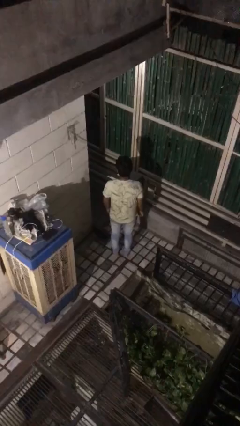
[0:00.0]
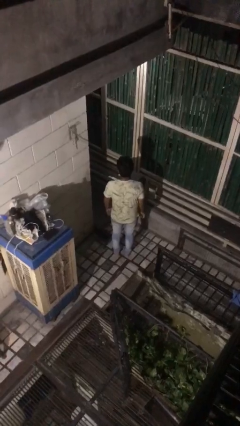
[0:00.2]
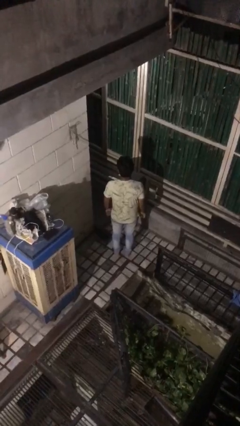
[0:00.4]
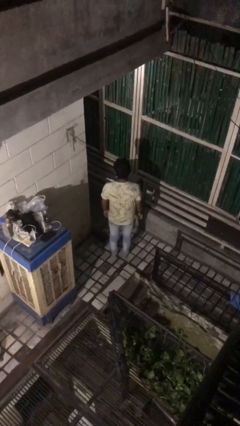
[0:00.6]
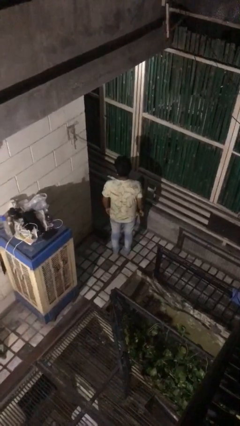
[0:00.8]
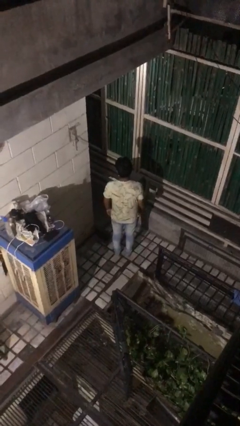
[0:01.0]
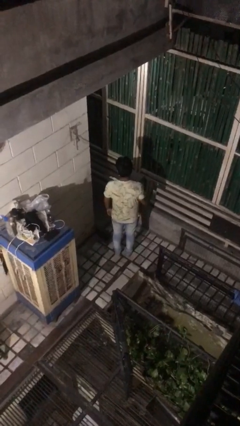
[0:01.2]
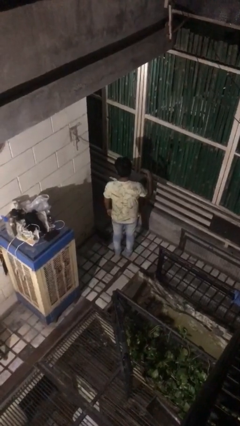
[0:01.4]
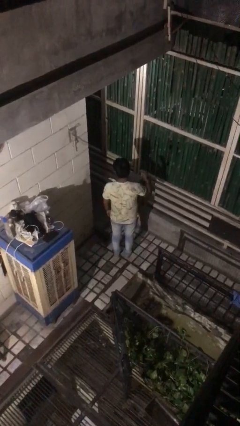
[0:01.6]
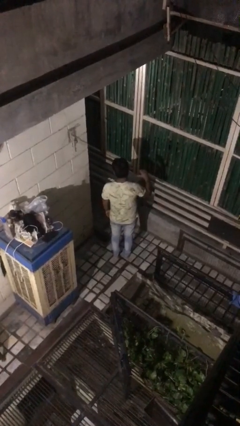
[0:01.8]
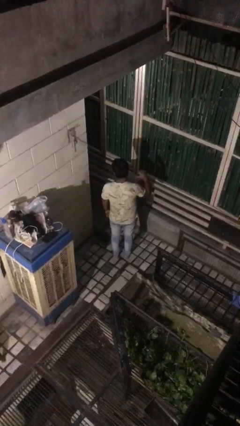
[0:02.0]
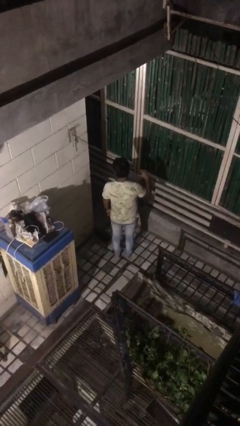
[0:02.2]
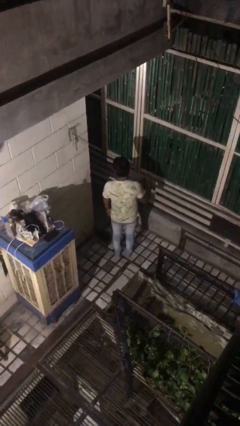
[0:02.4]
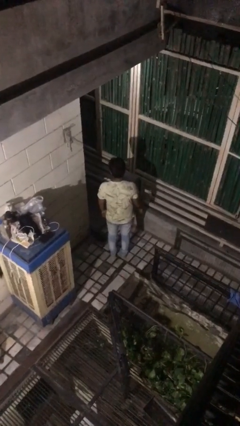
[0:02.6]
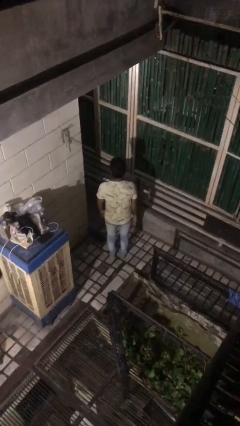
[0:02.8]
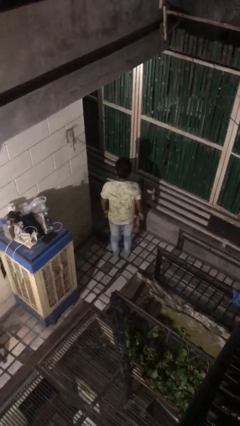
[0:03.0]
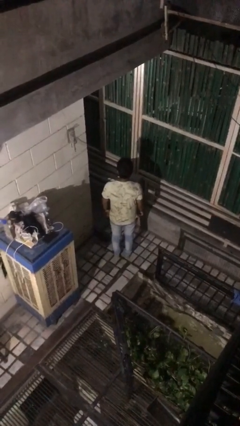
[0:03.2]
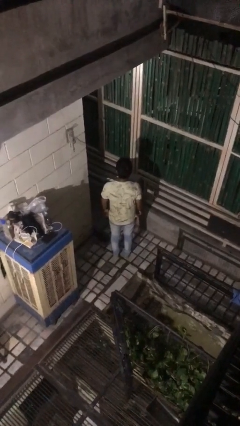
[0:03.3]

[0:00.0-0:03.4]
person gestures behind me

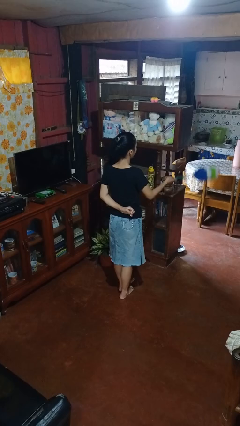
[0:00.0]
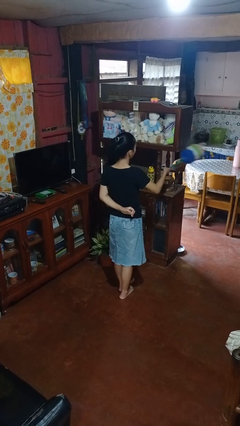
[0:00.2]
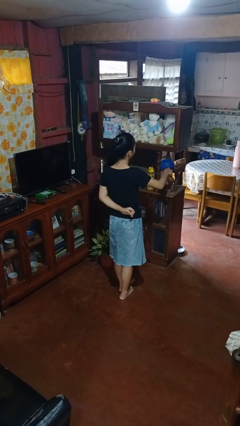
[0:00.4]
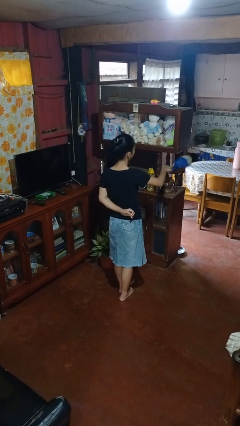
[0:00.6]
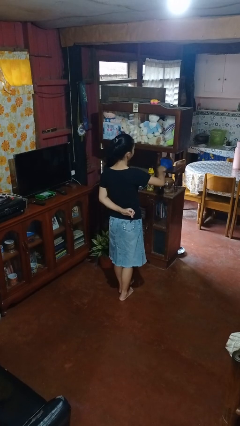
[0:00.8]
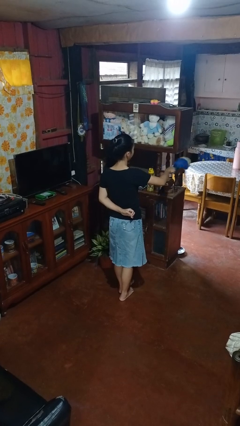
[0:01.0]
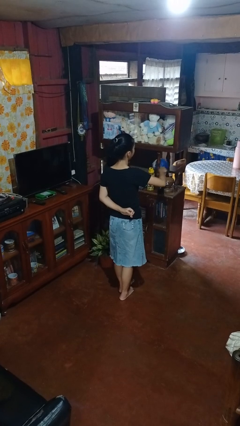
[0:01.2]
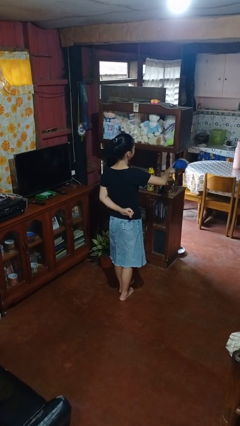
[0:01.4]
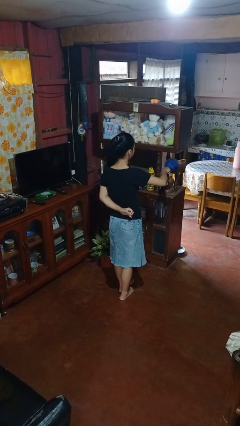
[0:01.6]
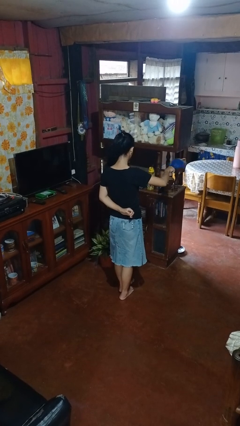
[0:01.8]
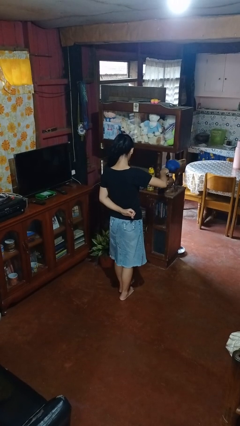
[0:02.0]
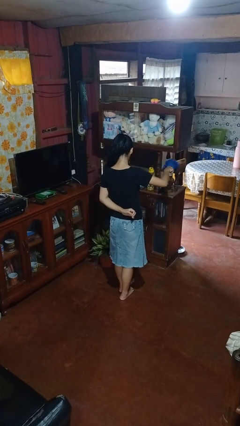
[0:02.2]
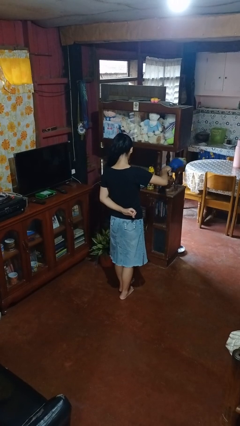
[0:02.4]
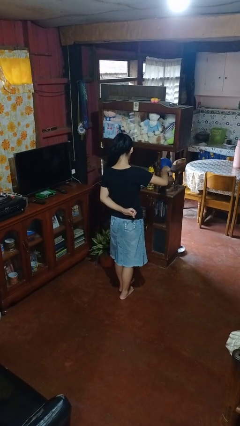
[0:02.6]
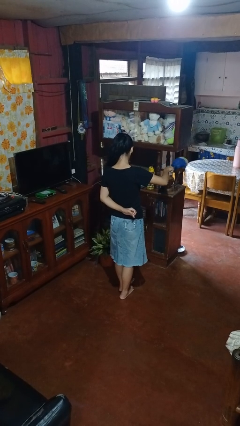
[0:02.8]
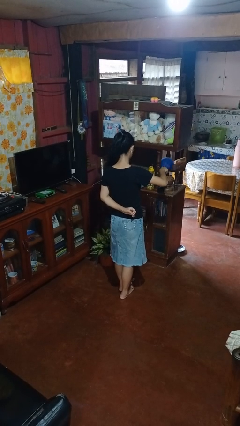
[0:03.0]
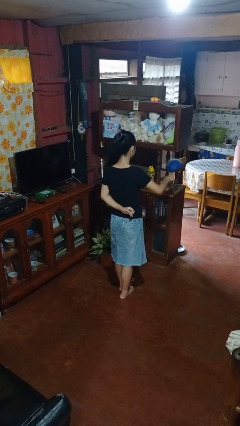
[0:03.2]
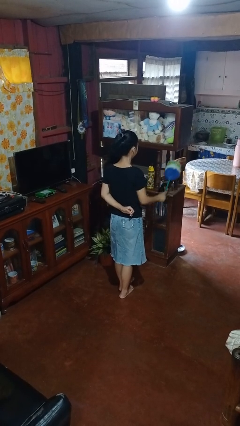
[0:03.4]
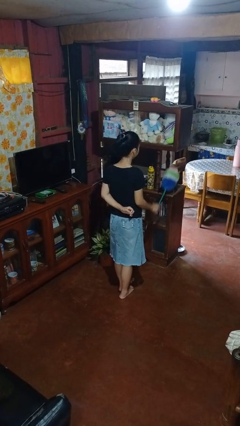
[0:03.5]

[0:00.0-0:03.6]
person dusts furniture

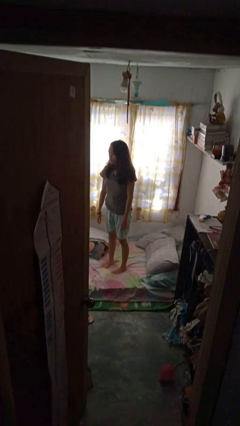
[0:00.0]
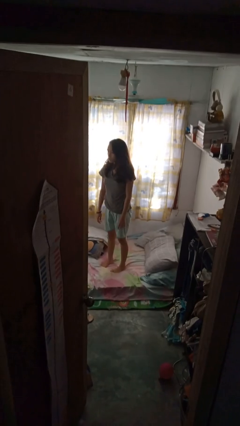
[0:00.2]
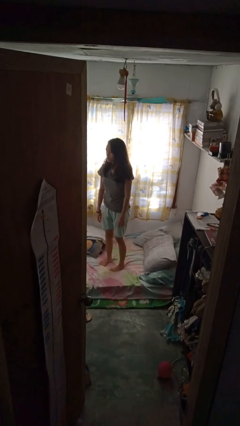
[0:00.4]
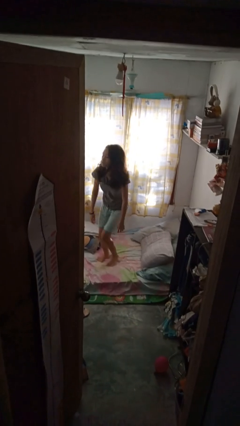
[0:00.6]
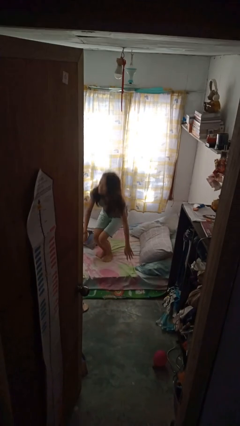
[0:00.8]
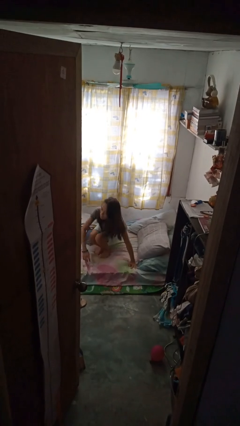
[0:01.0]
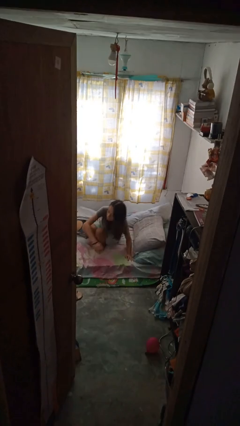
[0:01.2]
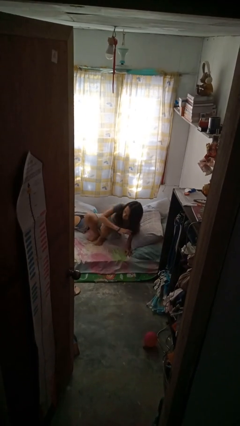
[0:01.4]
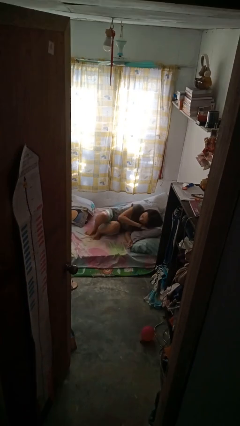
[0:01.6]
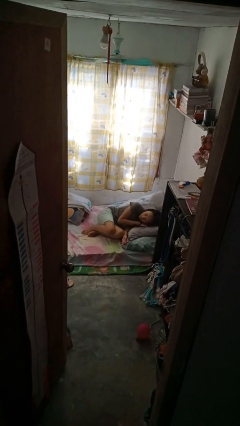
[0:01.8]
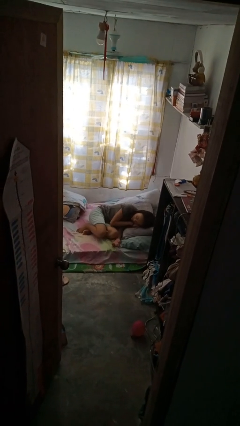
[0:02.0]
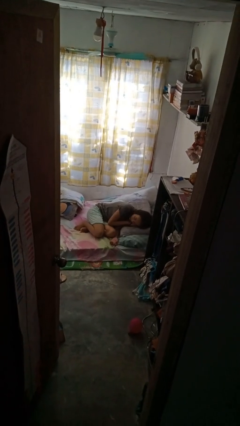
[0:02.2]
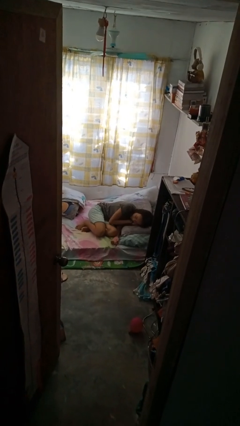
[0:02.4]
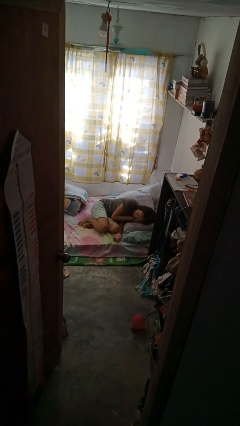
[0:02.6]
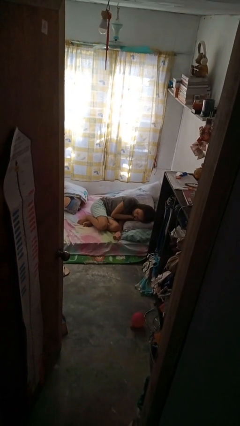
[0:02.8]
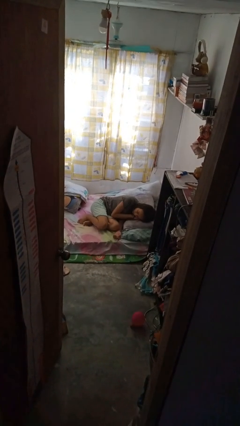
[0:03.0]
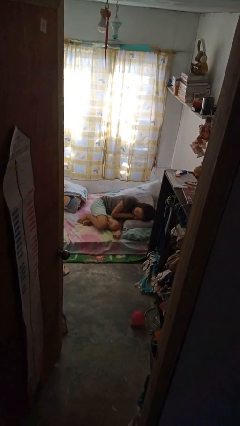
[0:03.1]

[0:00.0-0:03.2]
person lies down on bed

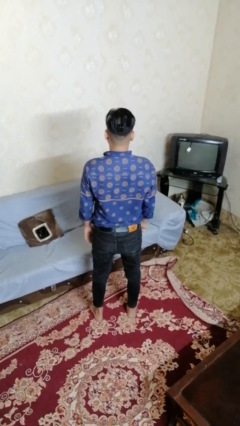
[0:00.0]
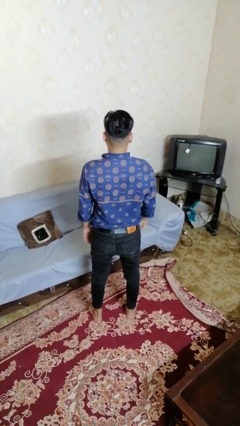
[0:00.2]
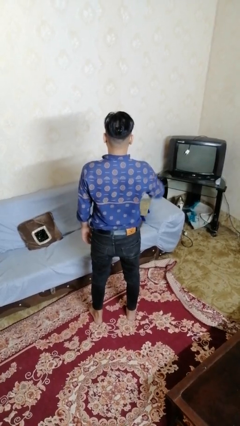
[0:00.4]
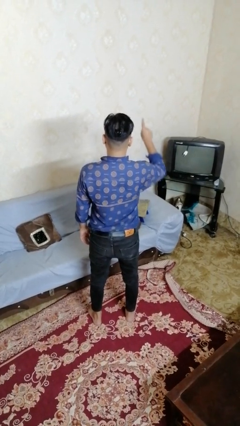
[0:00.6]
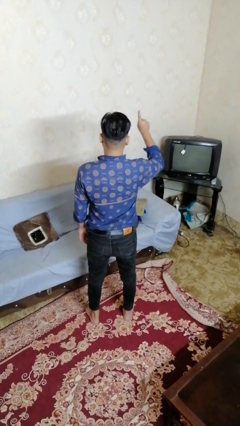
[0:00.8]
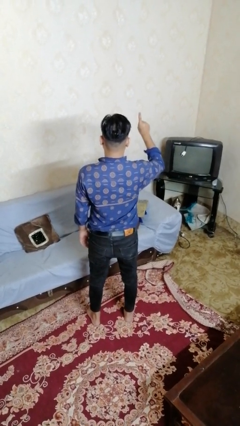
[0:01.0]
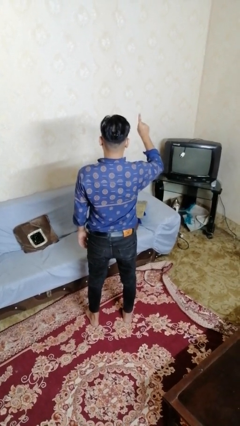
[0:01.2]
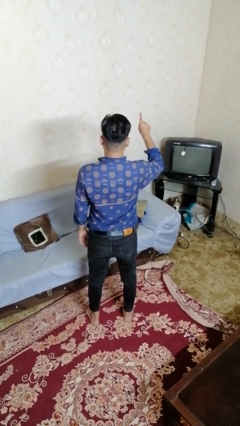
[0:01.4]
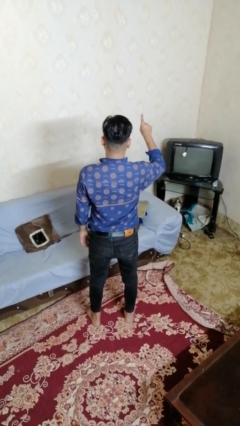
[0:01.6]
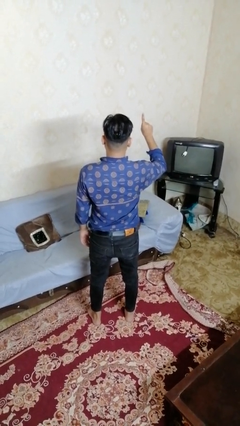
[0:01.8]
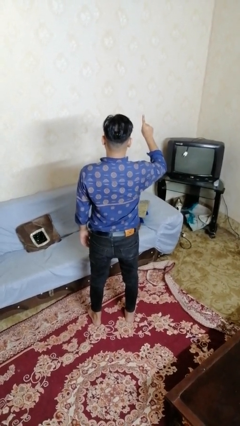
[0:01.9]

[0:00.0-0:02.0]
person gestures number one

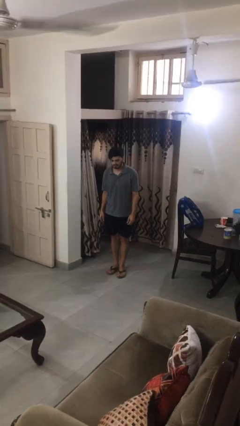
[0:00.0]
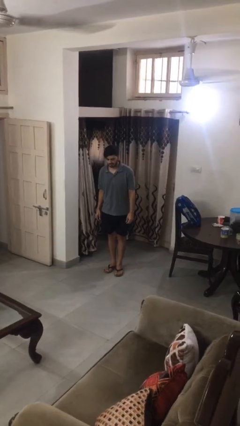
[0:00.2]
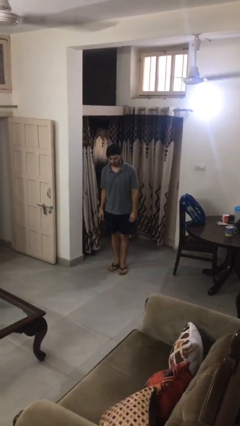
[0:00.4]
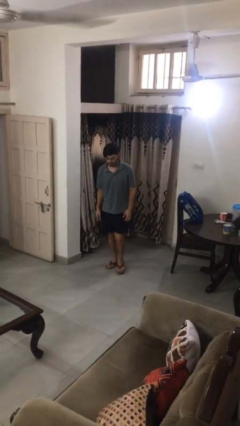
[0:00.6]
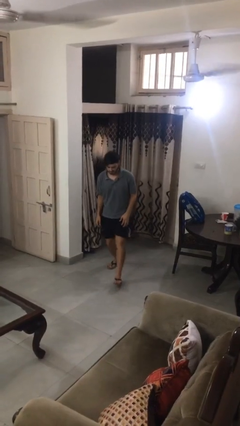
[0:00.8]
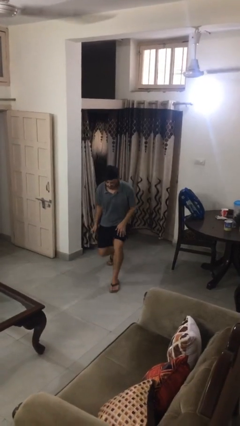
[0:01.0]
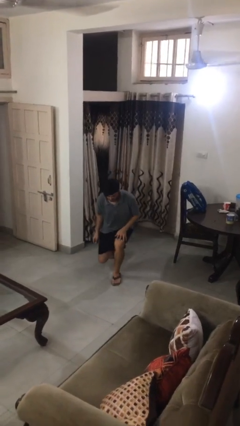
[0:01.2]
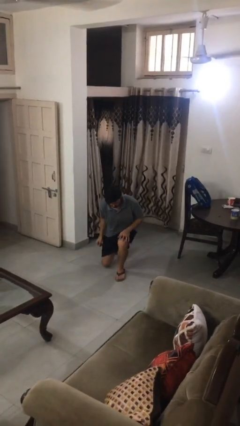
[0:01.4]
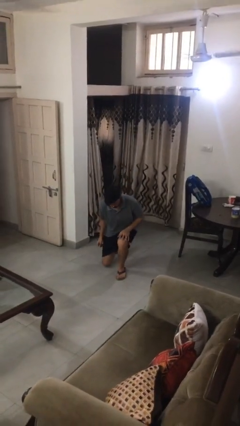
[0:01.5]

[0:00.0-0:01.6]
person kneels

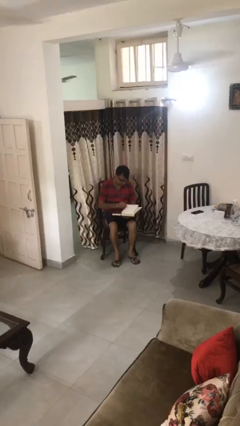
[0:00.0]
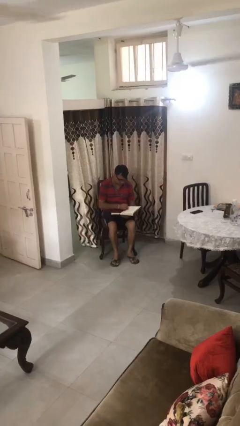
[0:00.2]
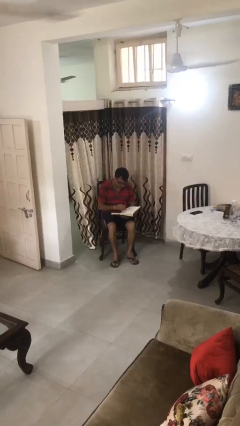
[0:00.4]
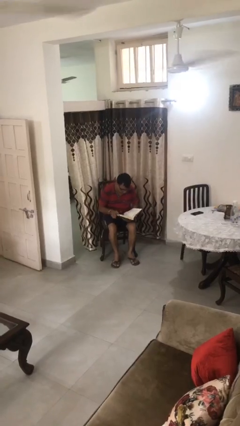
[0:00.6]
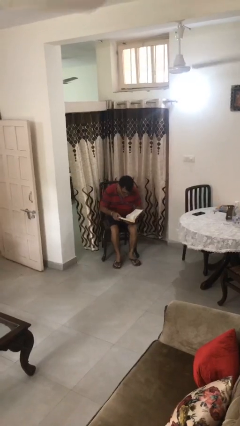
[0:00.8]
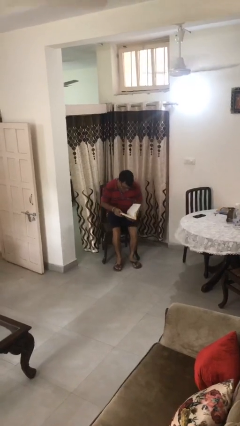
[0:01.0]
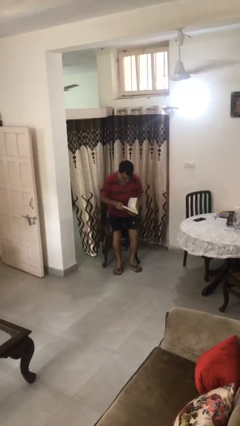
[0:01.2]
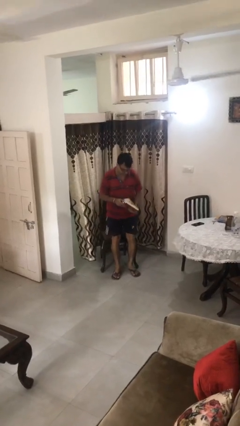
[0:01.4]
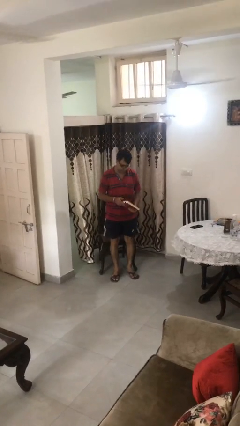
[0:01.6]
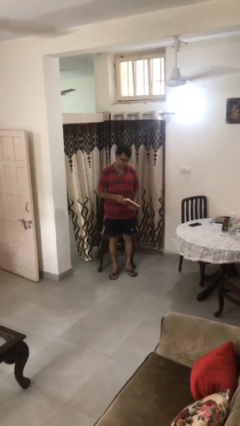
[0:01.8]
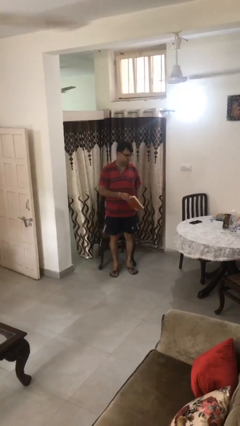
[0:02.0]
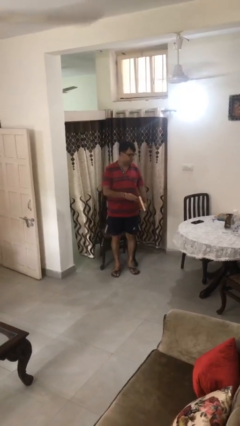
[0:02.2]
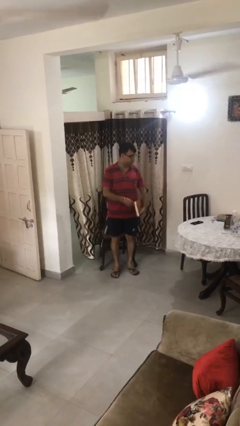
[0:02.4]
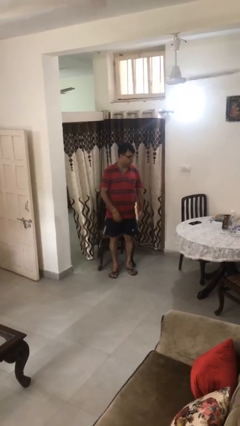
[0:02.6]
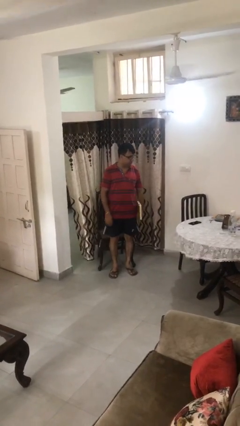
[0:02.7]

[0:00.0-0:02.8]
person stands up

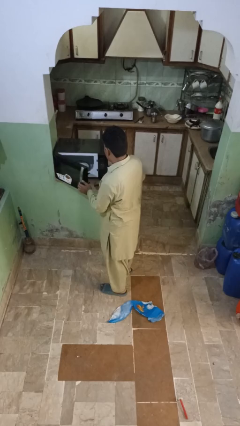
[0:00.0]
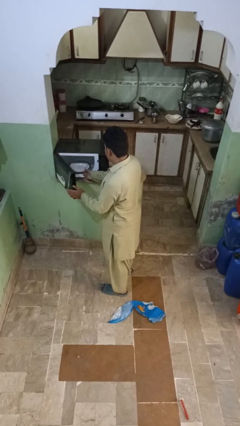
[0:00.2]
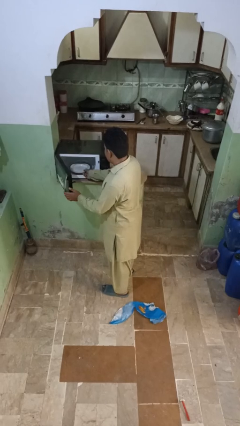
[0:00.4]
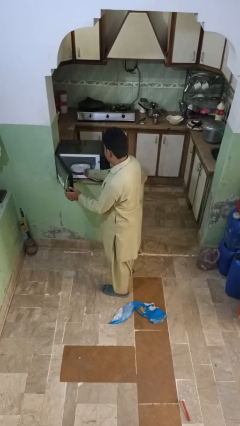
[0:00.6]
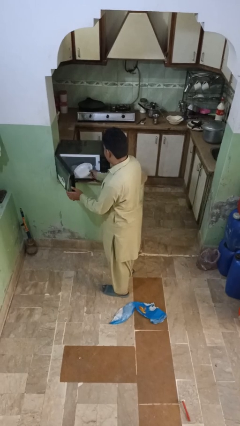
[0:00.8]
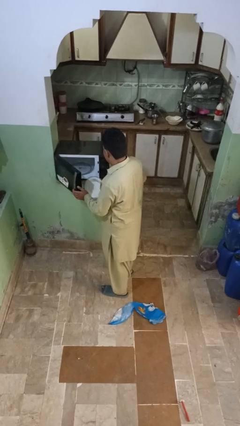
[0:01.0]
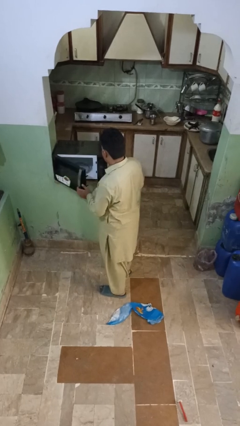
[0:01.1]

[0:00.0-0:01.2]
person takes object from microwave
